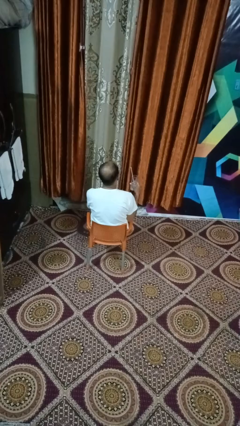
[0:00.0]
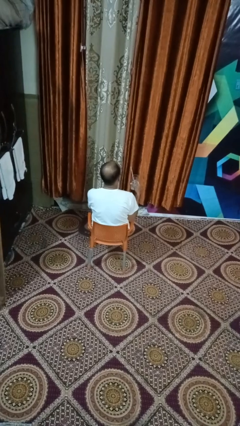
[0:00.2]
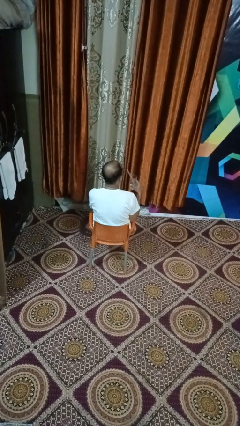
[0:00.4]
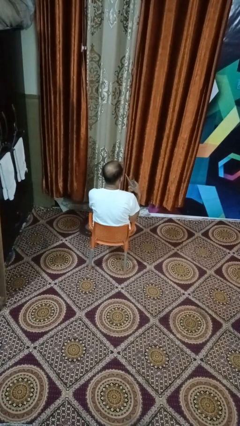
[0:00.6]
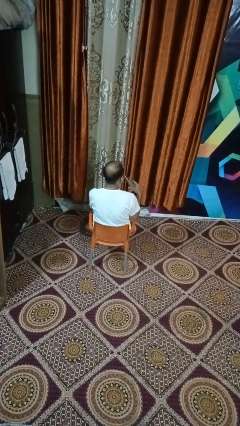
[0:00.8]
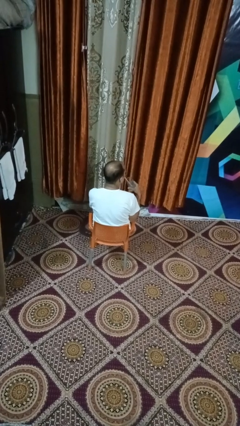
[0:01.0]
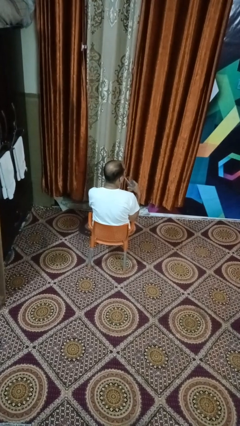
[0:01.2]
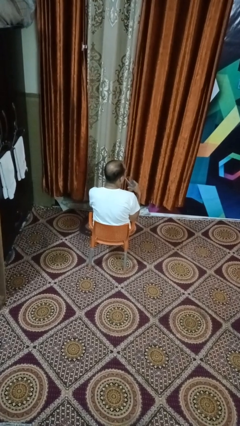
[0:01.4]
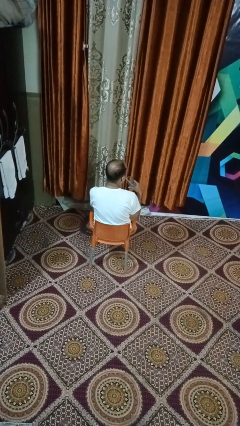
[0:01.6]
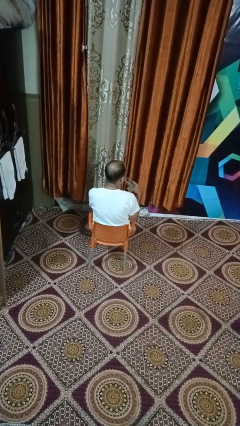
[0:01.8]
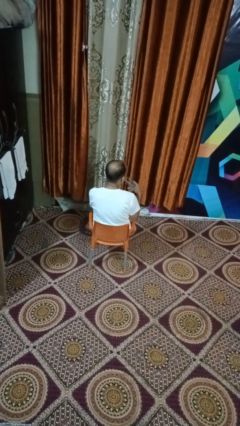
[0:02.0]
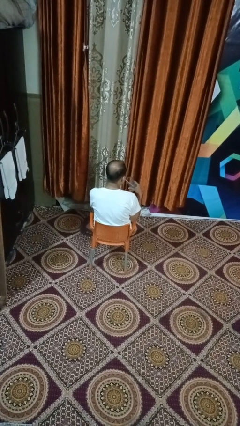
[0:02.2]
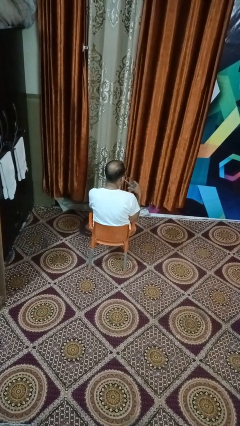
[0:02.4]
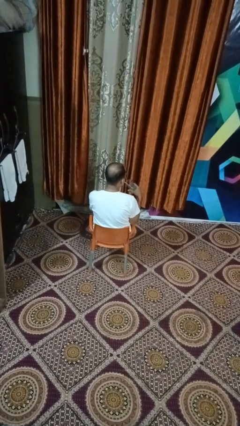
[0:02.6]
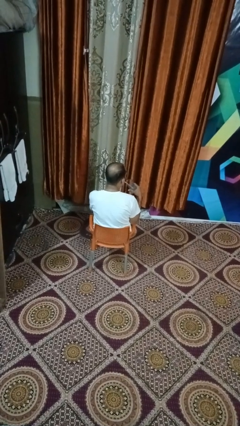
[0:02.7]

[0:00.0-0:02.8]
person drinks from straw

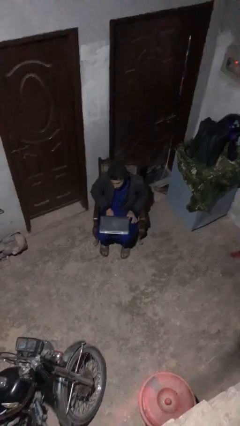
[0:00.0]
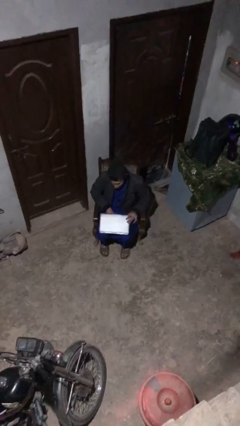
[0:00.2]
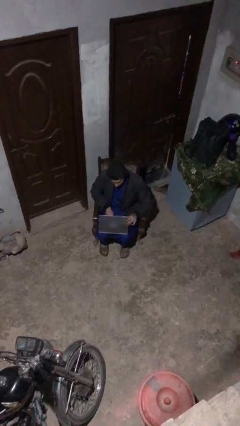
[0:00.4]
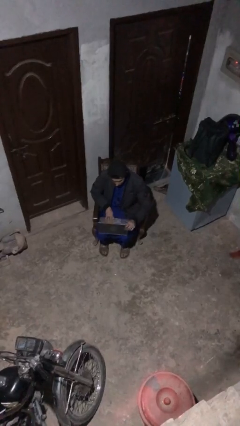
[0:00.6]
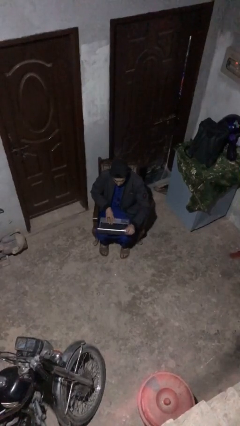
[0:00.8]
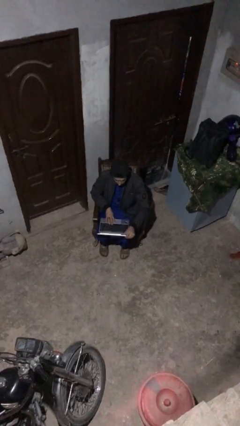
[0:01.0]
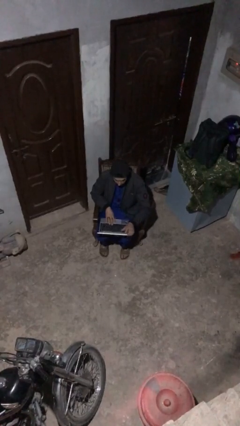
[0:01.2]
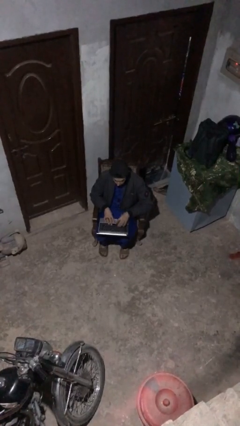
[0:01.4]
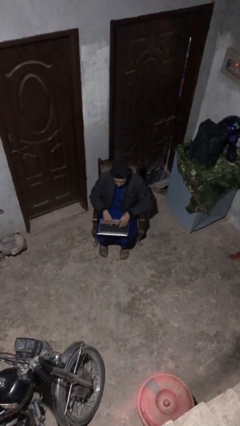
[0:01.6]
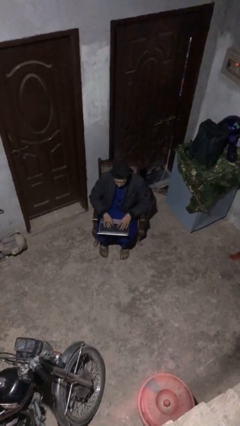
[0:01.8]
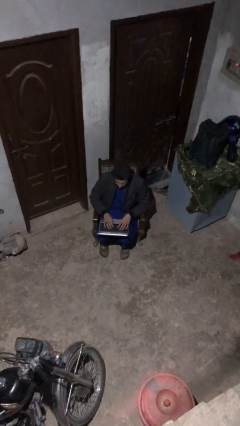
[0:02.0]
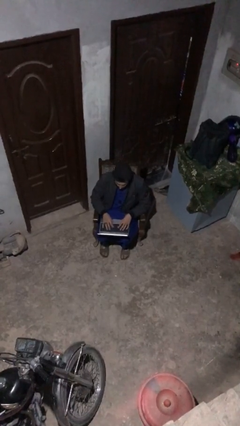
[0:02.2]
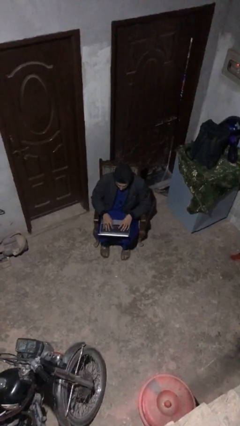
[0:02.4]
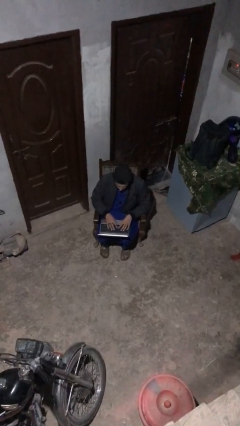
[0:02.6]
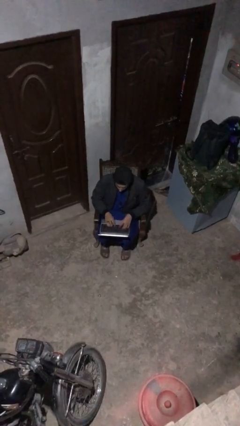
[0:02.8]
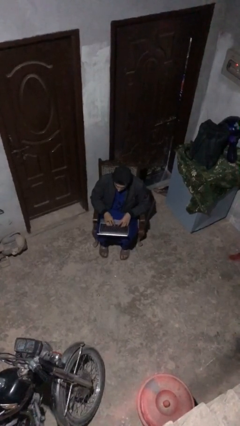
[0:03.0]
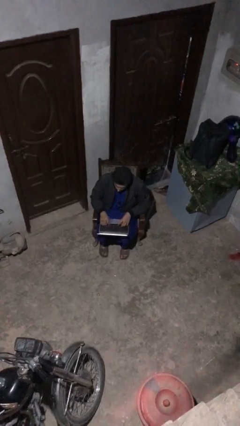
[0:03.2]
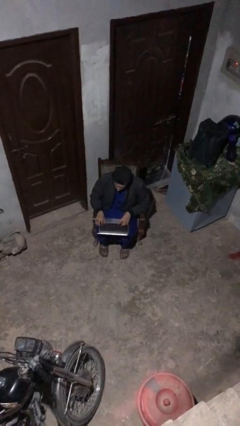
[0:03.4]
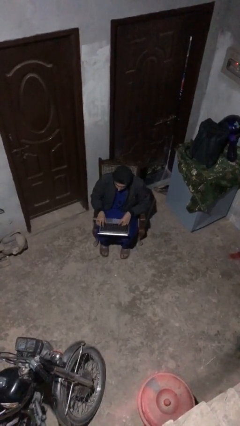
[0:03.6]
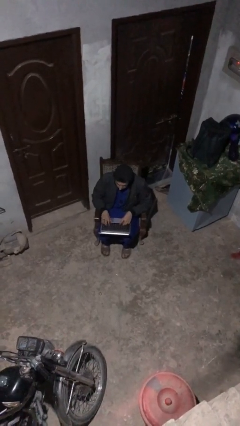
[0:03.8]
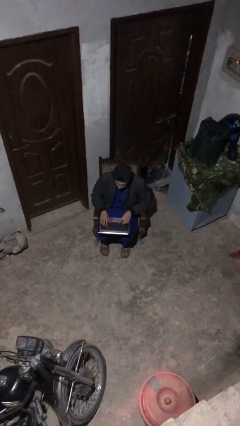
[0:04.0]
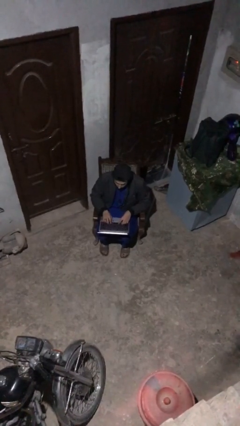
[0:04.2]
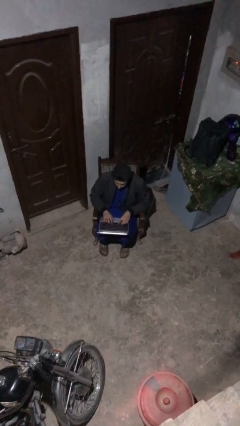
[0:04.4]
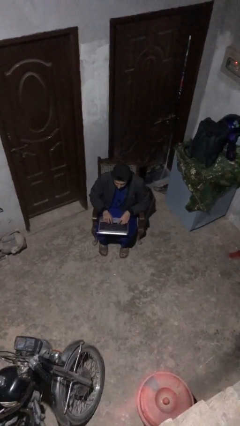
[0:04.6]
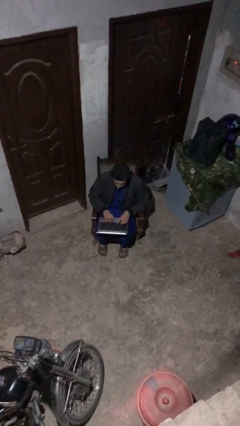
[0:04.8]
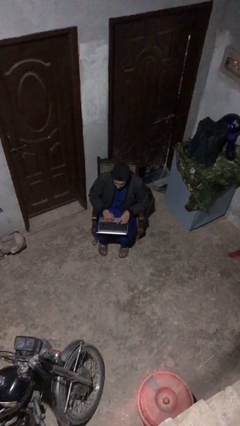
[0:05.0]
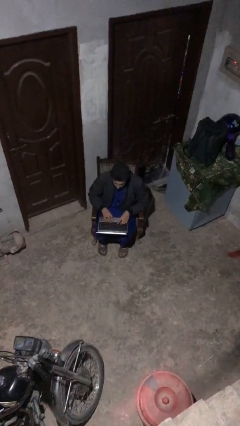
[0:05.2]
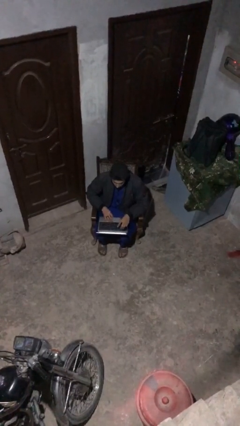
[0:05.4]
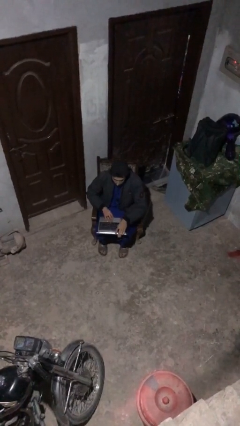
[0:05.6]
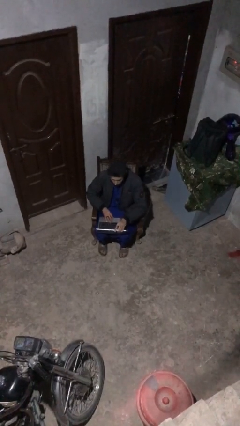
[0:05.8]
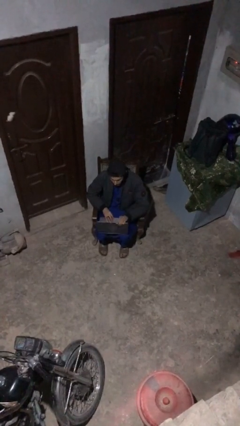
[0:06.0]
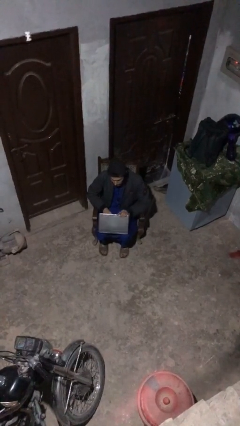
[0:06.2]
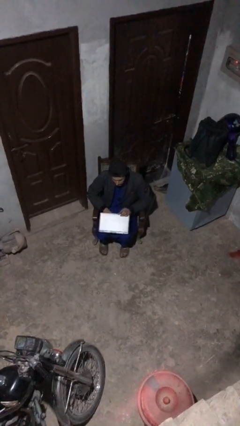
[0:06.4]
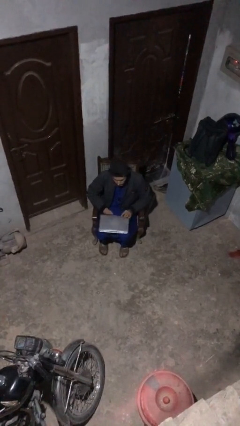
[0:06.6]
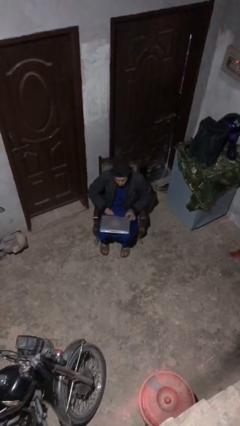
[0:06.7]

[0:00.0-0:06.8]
person interacts with laptop

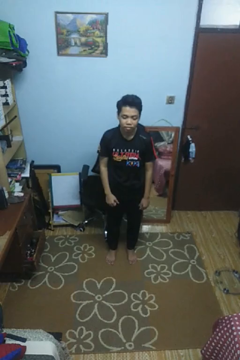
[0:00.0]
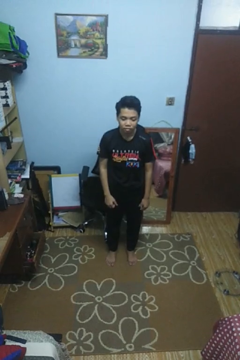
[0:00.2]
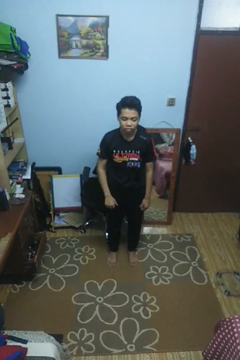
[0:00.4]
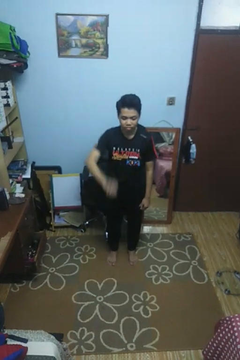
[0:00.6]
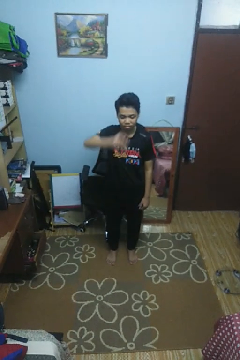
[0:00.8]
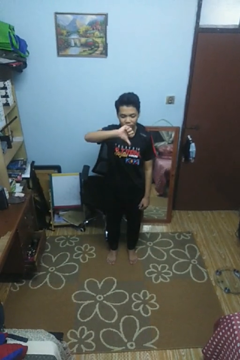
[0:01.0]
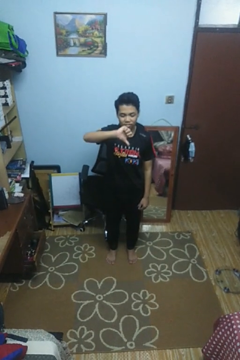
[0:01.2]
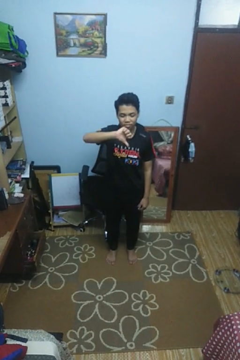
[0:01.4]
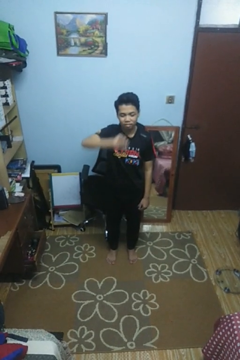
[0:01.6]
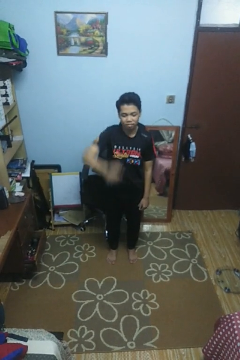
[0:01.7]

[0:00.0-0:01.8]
person gestures thumbs down

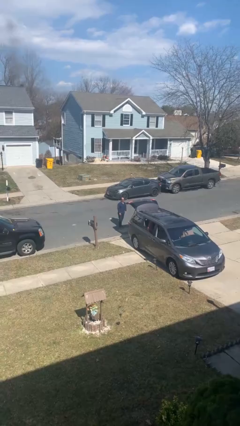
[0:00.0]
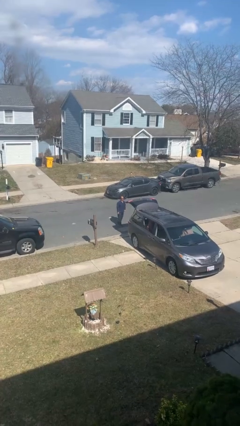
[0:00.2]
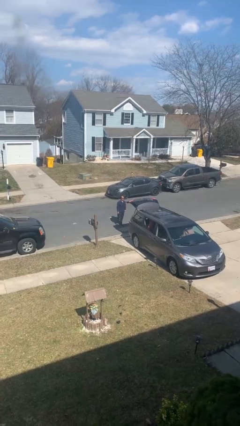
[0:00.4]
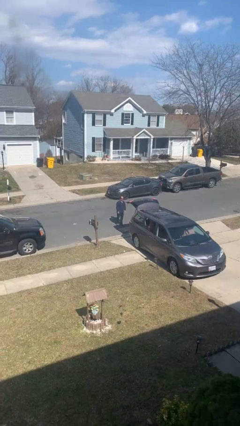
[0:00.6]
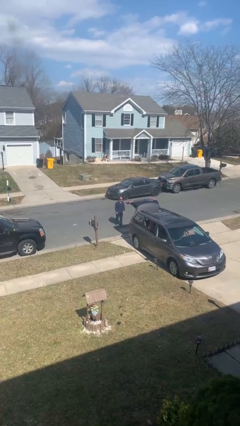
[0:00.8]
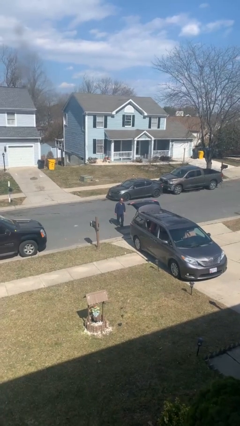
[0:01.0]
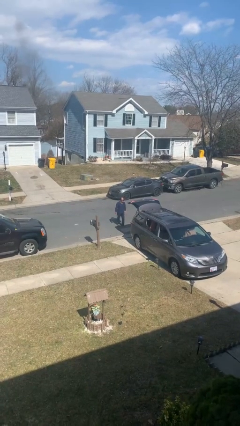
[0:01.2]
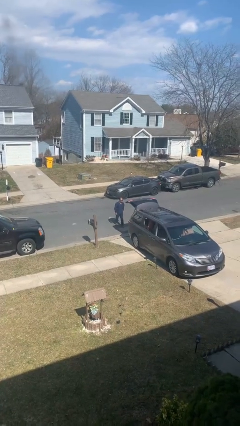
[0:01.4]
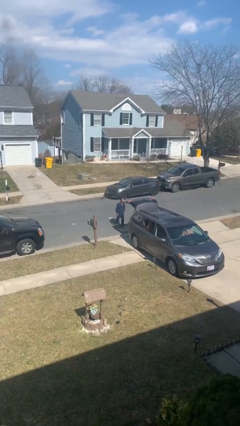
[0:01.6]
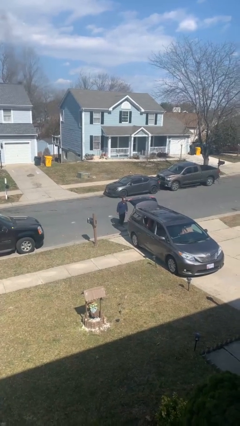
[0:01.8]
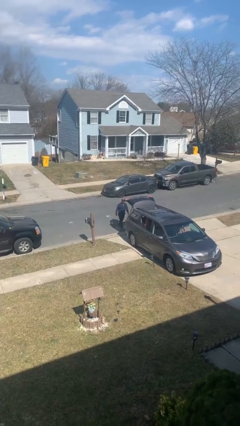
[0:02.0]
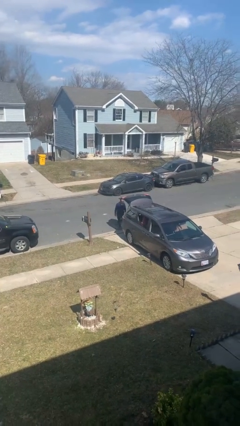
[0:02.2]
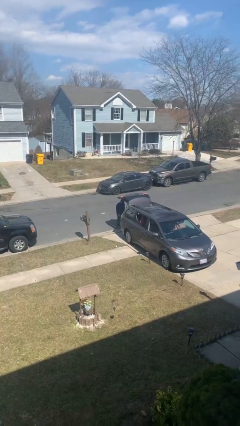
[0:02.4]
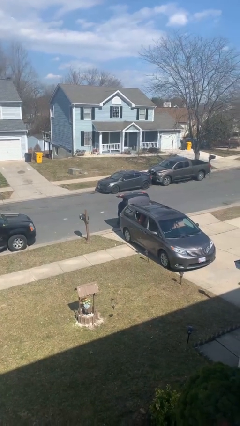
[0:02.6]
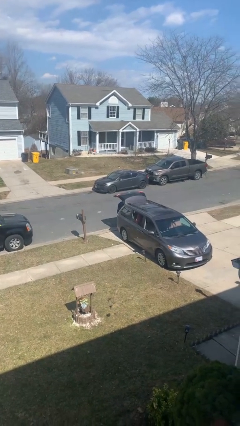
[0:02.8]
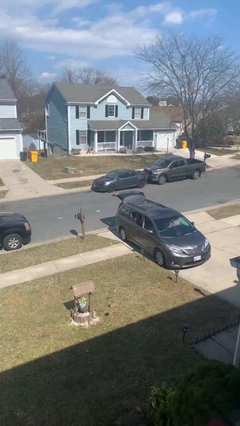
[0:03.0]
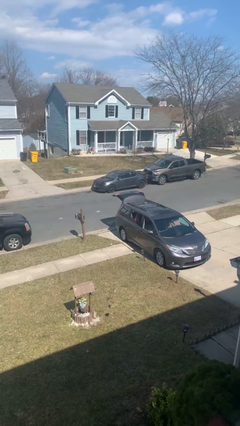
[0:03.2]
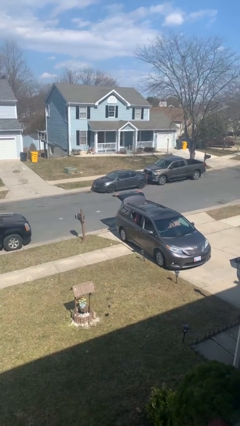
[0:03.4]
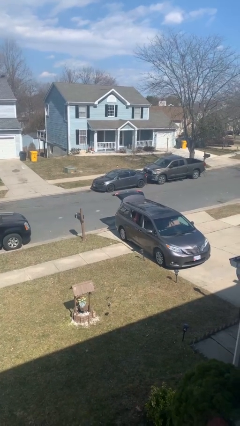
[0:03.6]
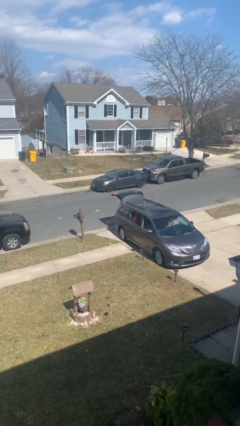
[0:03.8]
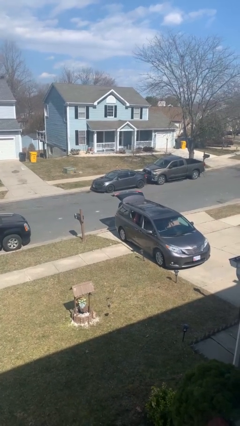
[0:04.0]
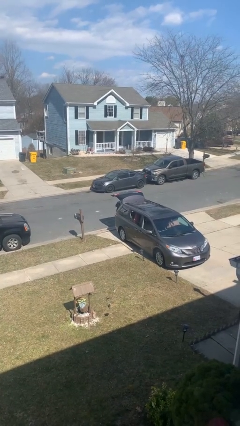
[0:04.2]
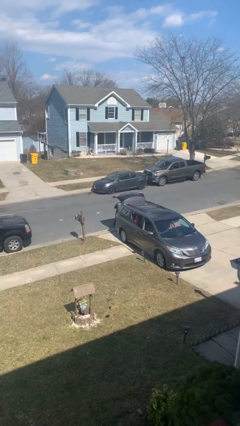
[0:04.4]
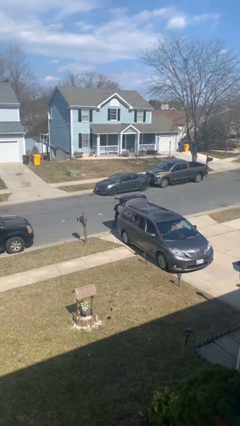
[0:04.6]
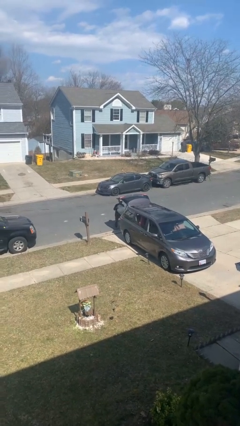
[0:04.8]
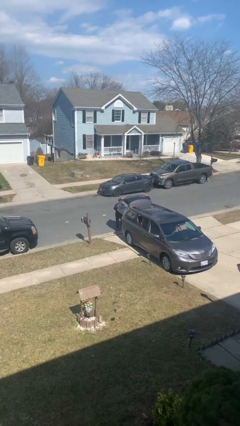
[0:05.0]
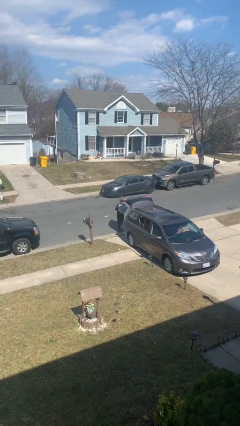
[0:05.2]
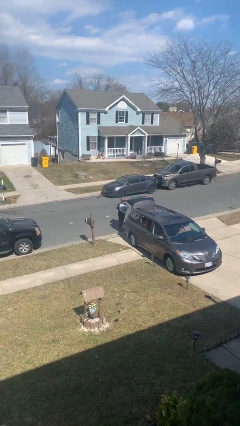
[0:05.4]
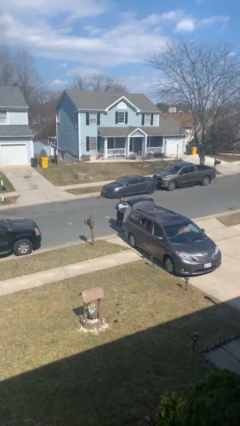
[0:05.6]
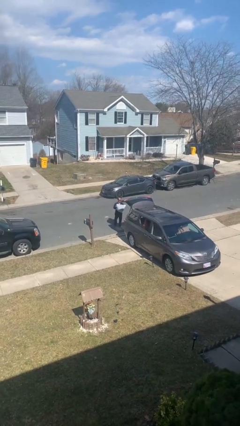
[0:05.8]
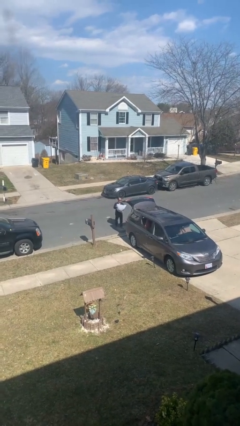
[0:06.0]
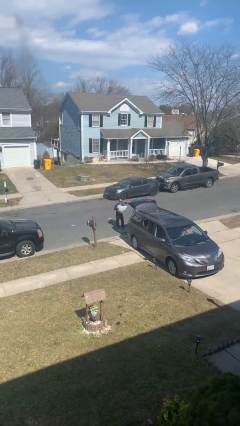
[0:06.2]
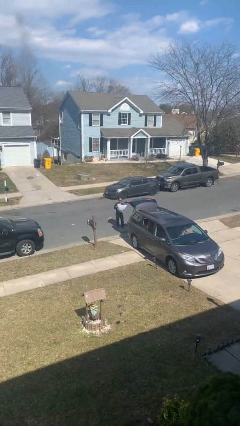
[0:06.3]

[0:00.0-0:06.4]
person unloads car

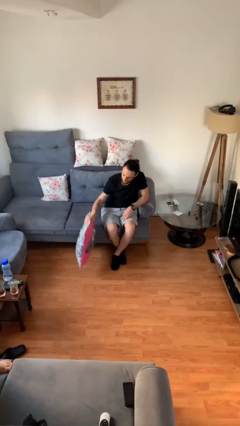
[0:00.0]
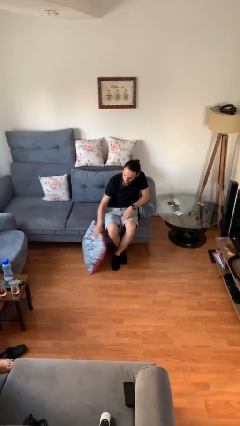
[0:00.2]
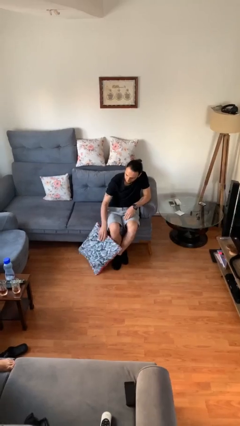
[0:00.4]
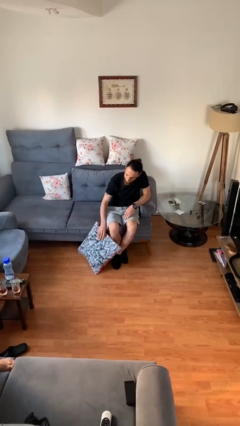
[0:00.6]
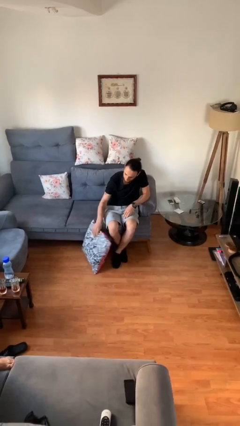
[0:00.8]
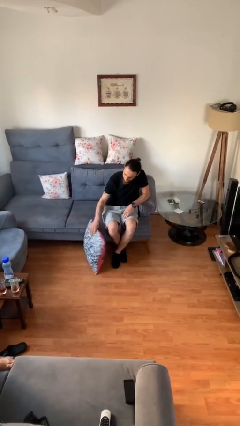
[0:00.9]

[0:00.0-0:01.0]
person puts down object on floor
